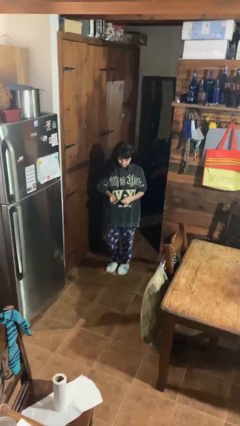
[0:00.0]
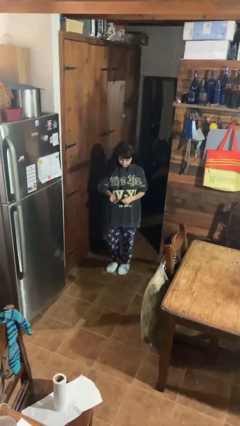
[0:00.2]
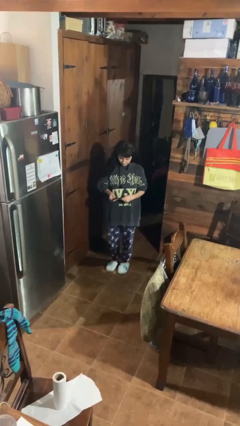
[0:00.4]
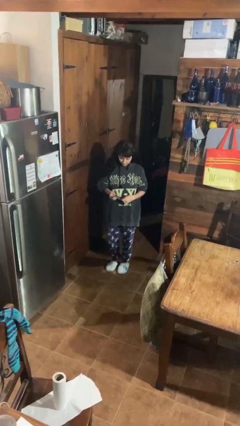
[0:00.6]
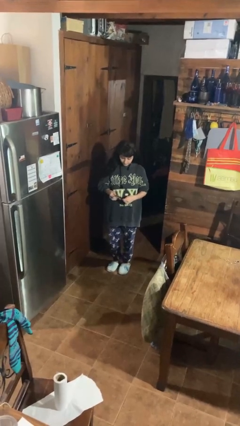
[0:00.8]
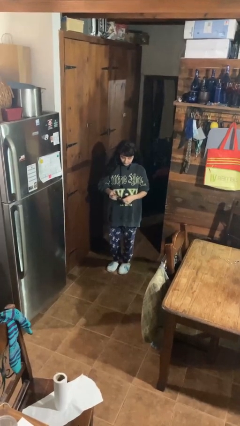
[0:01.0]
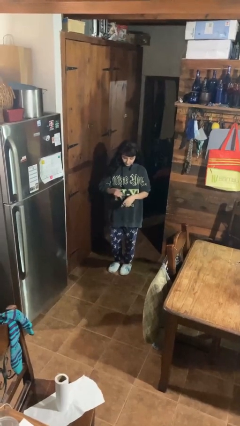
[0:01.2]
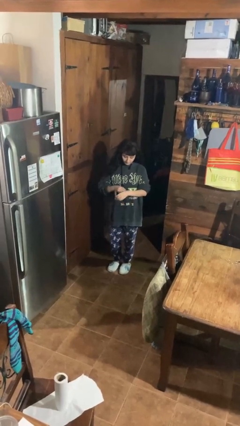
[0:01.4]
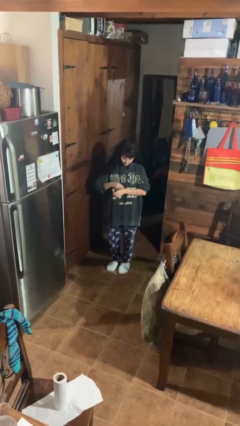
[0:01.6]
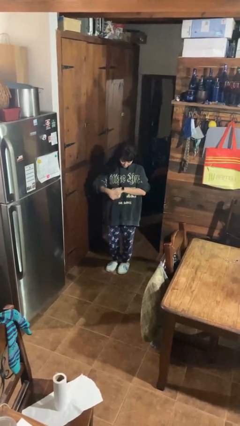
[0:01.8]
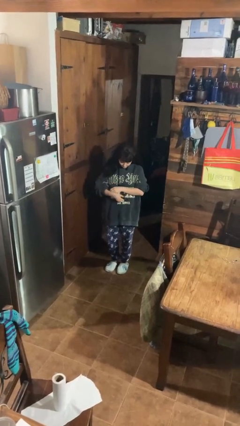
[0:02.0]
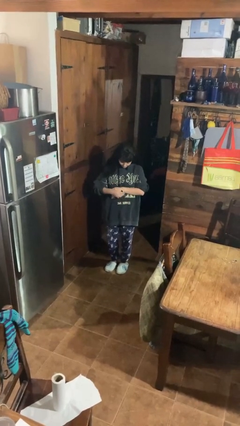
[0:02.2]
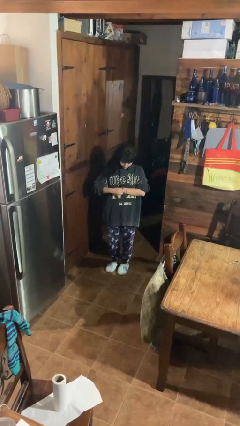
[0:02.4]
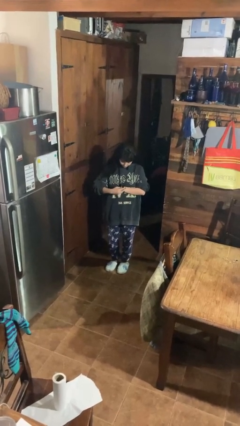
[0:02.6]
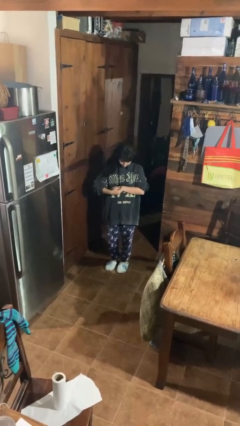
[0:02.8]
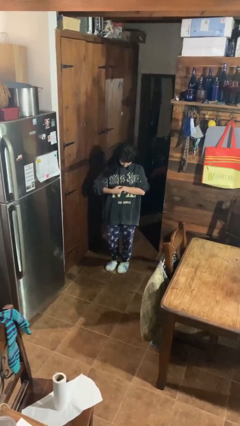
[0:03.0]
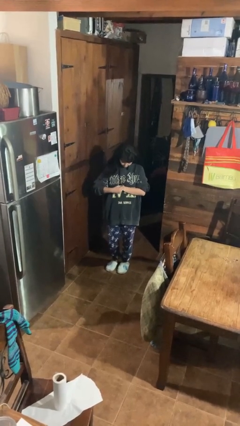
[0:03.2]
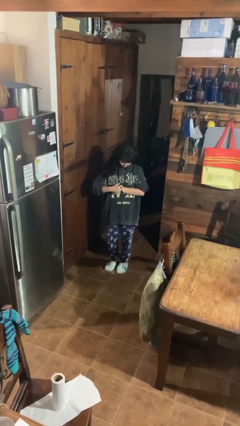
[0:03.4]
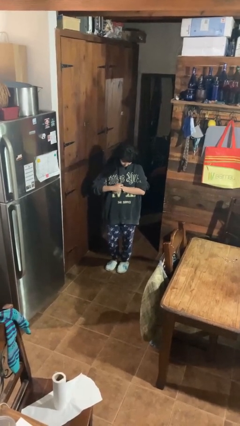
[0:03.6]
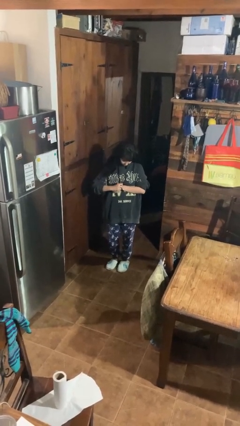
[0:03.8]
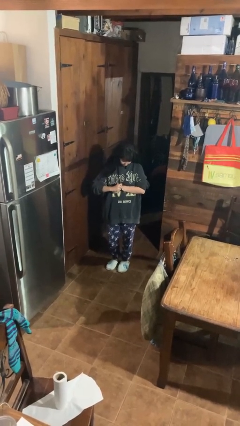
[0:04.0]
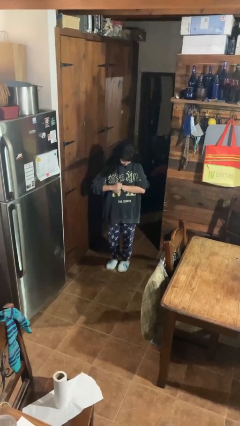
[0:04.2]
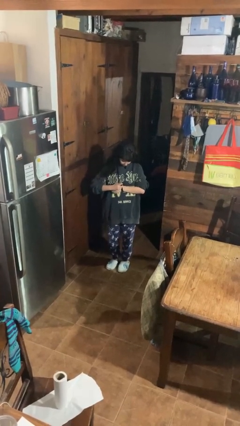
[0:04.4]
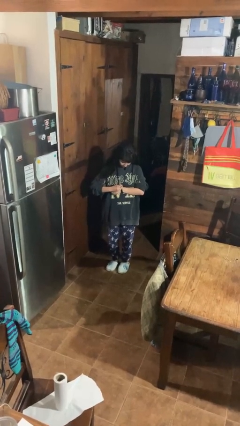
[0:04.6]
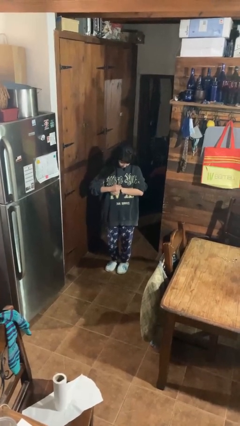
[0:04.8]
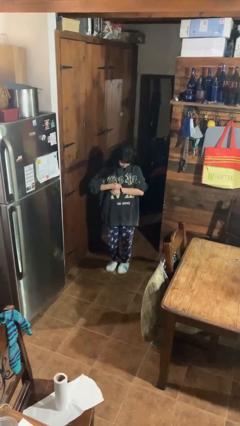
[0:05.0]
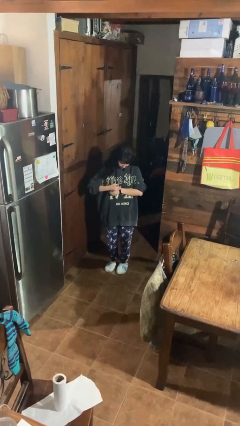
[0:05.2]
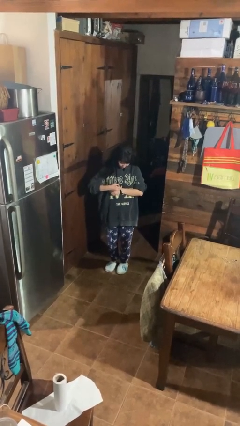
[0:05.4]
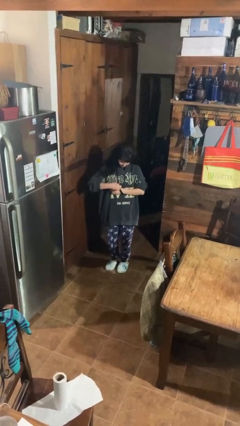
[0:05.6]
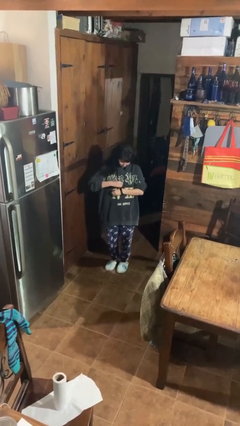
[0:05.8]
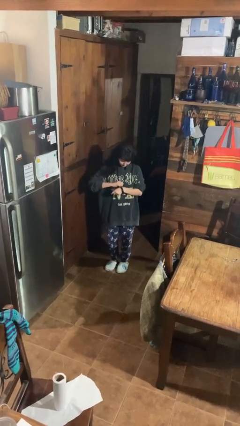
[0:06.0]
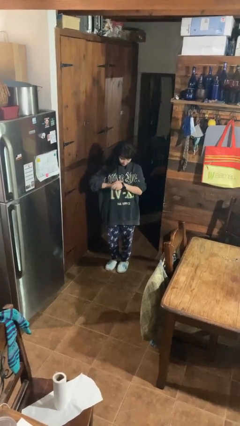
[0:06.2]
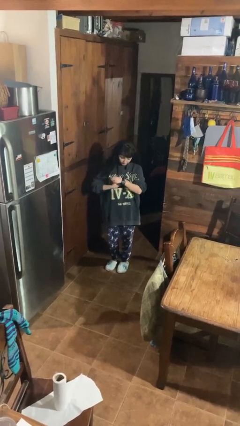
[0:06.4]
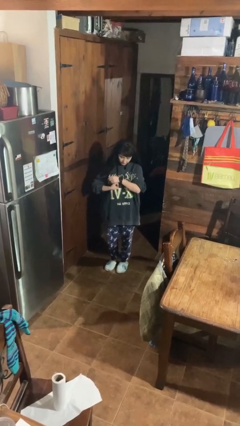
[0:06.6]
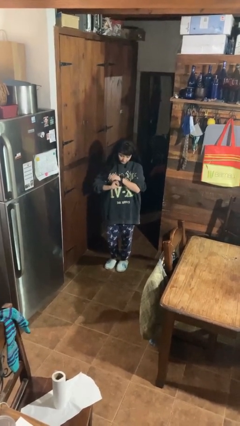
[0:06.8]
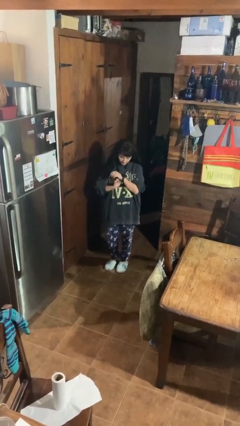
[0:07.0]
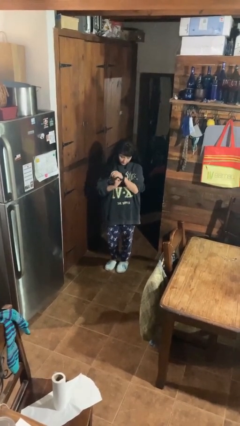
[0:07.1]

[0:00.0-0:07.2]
person puts on wristwatch

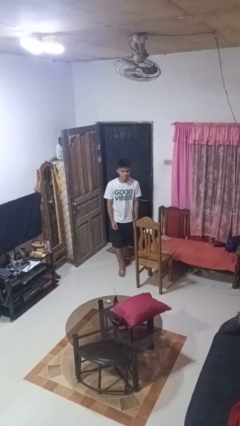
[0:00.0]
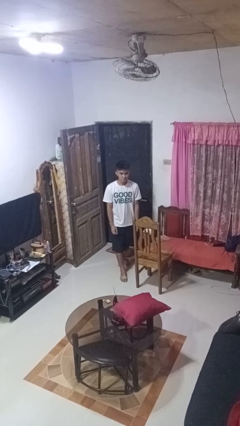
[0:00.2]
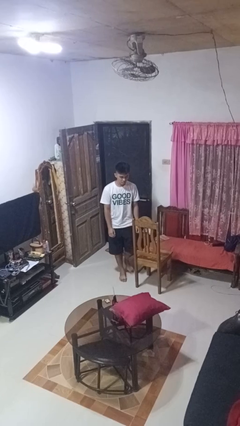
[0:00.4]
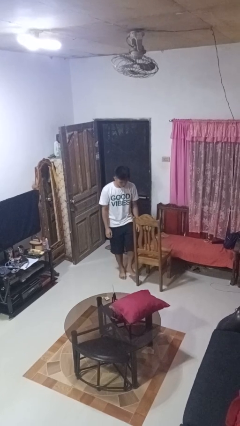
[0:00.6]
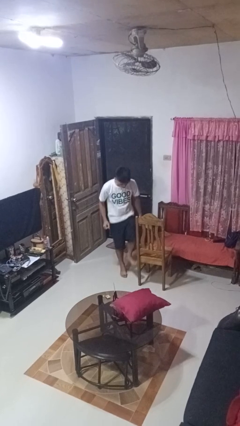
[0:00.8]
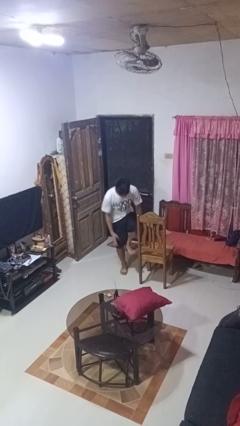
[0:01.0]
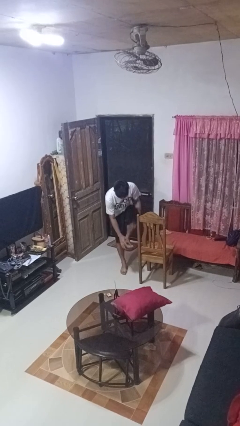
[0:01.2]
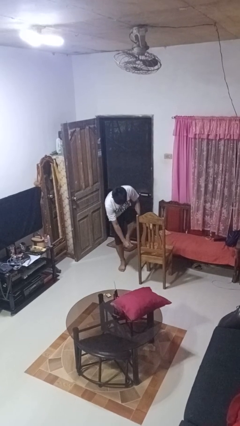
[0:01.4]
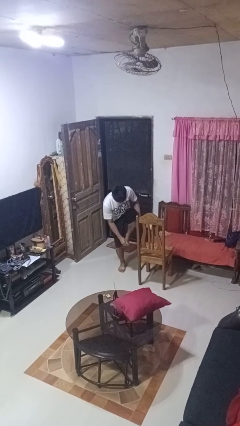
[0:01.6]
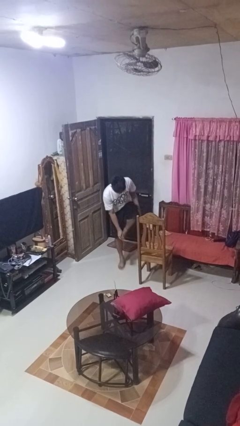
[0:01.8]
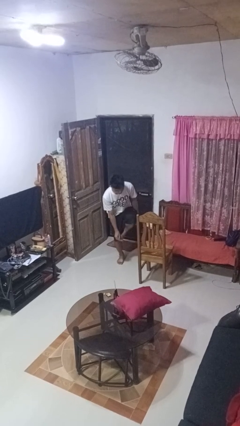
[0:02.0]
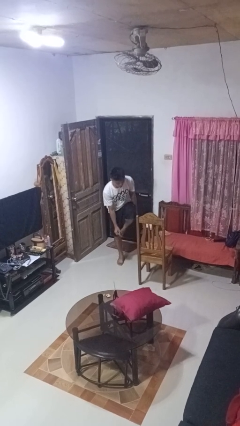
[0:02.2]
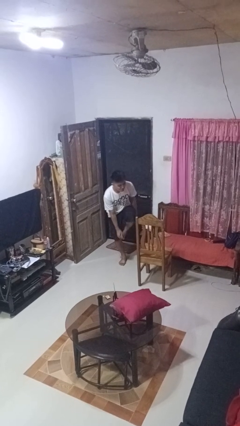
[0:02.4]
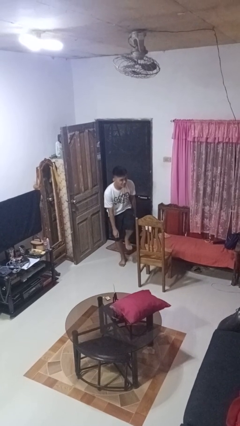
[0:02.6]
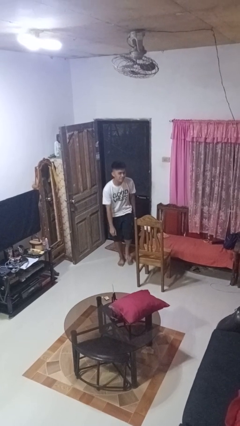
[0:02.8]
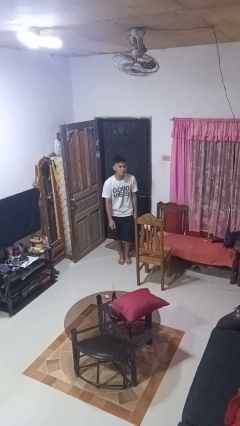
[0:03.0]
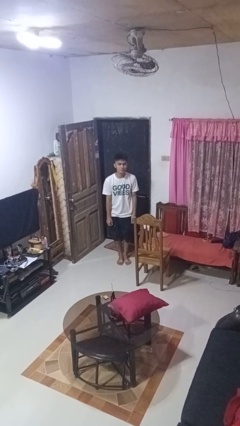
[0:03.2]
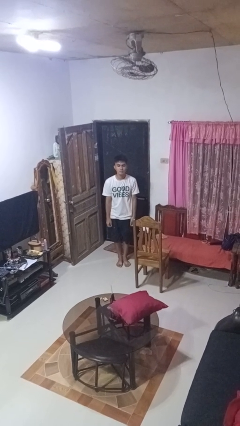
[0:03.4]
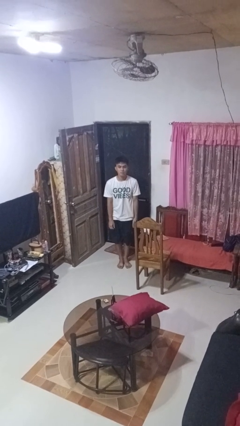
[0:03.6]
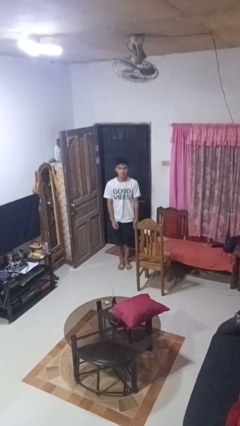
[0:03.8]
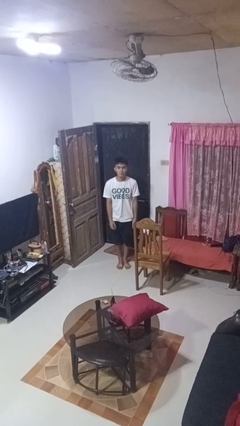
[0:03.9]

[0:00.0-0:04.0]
person stubs toe

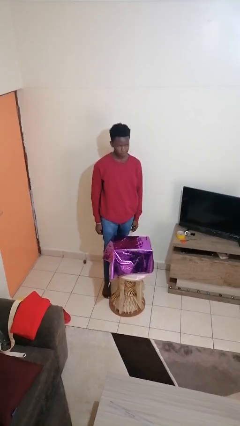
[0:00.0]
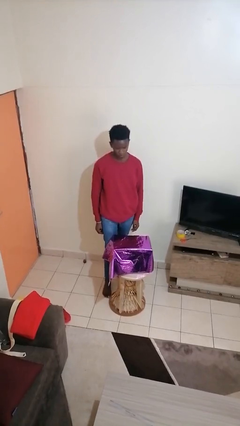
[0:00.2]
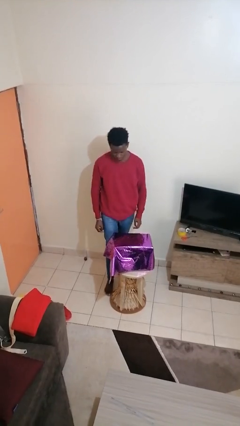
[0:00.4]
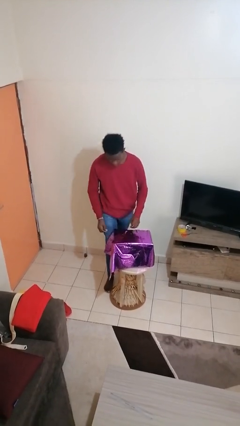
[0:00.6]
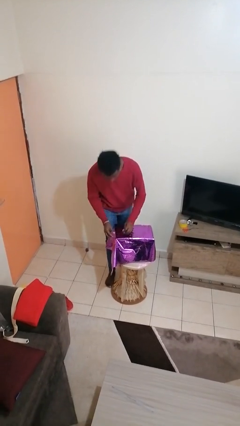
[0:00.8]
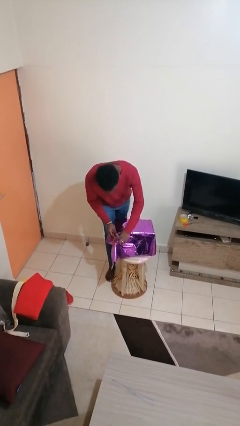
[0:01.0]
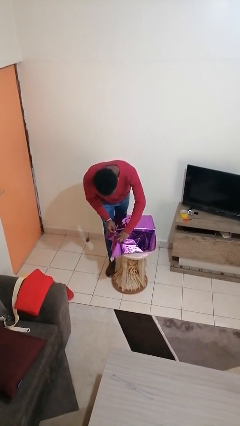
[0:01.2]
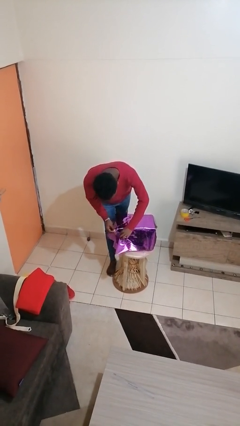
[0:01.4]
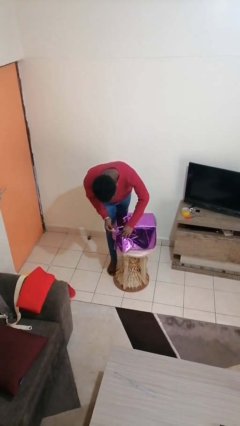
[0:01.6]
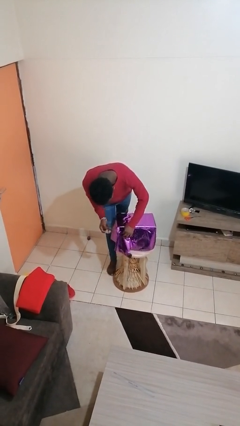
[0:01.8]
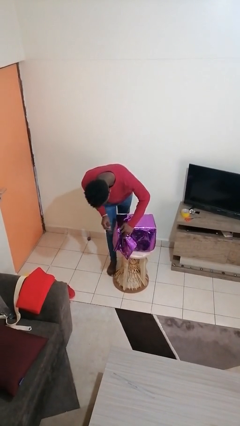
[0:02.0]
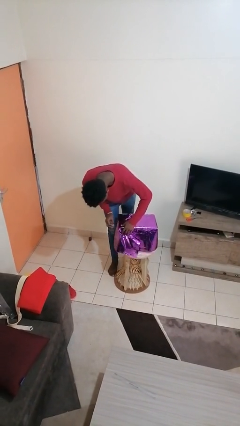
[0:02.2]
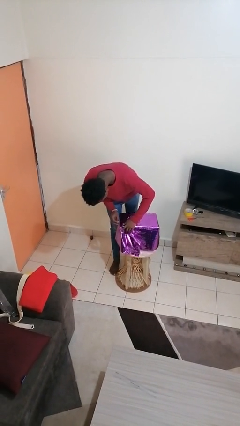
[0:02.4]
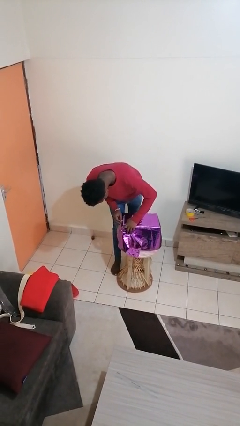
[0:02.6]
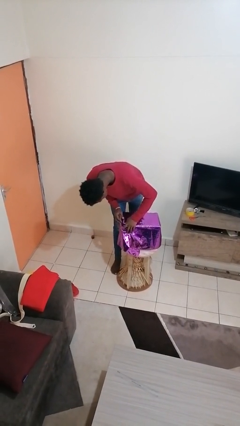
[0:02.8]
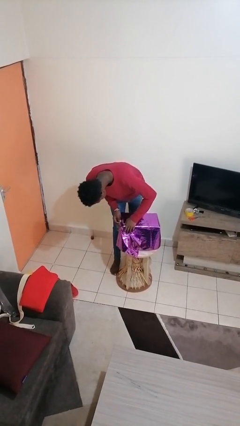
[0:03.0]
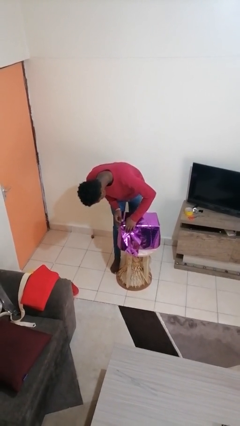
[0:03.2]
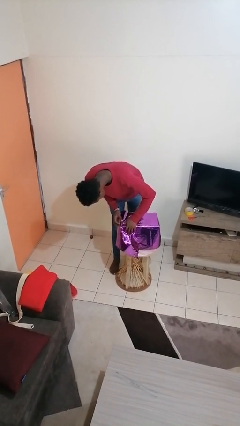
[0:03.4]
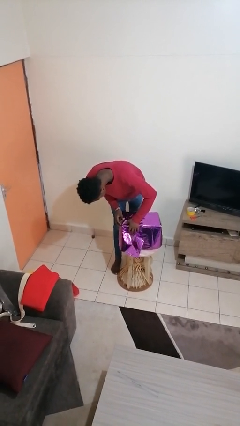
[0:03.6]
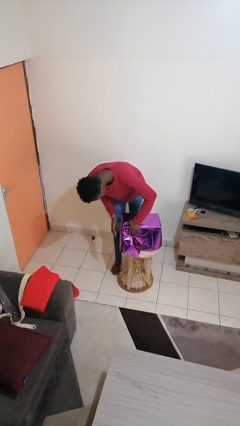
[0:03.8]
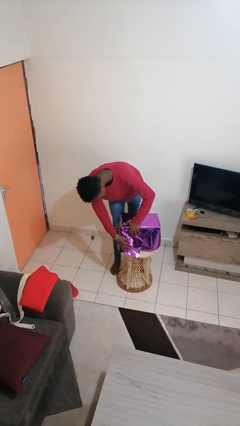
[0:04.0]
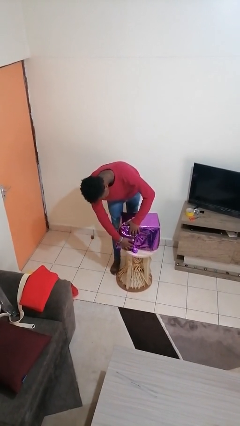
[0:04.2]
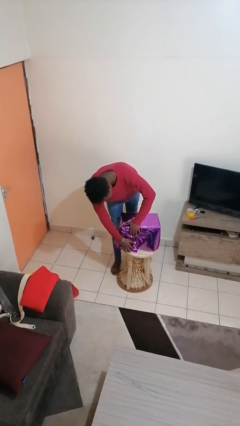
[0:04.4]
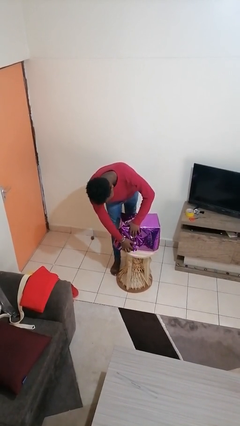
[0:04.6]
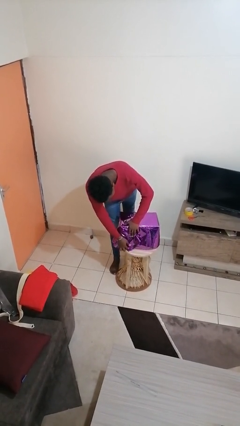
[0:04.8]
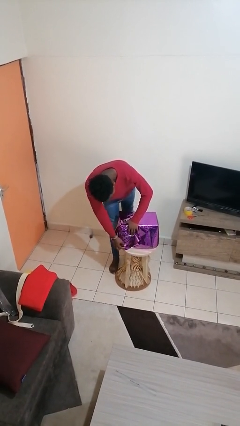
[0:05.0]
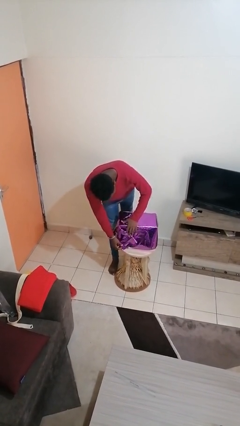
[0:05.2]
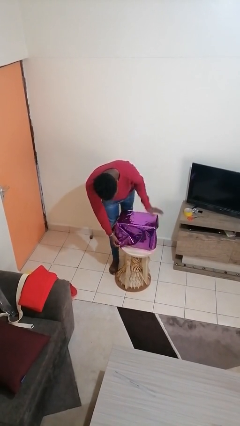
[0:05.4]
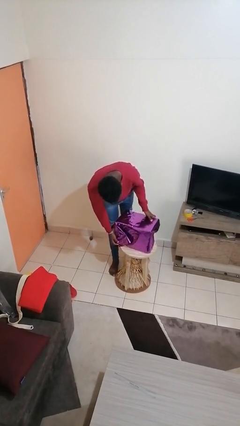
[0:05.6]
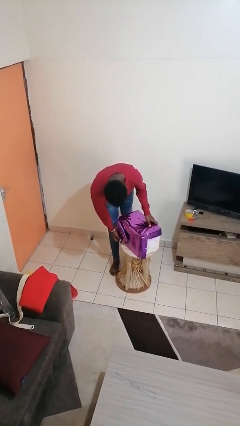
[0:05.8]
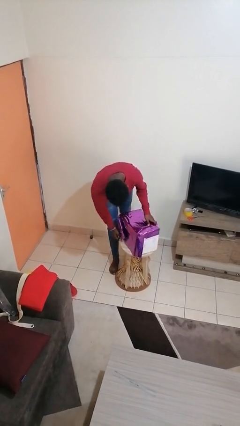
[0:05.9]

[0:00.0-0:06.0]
person wraps box

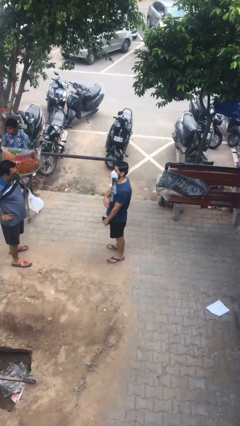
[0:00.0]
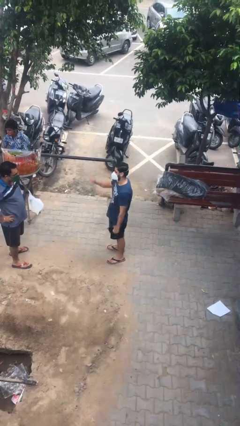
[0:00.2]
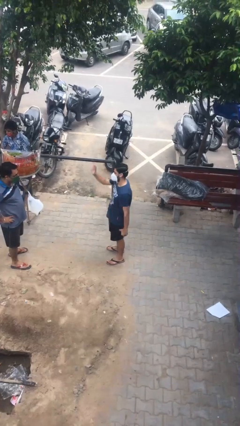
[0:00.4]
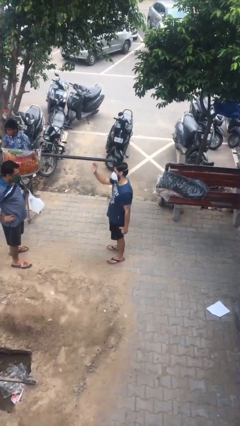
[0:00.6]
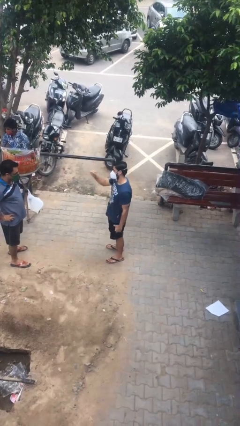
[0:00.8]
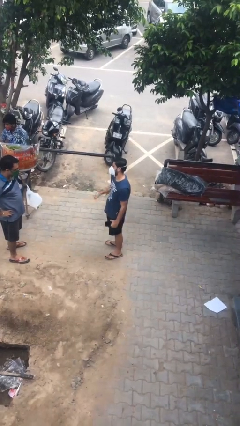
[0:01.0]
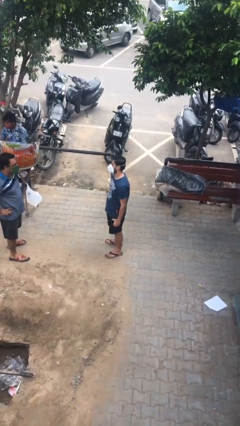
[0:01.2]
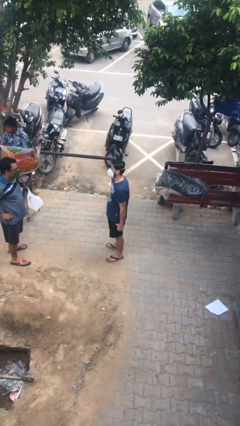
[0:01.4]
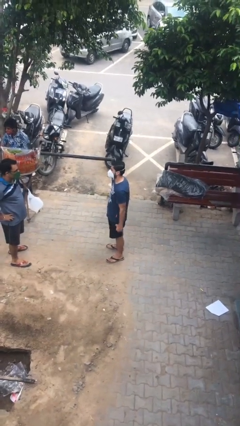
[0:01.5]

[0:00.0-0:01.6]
person waves at person
